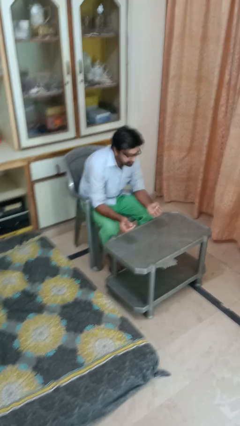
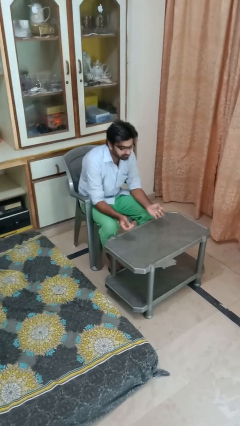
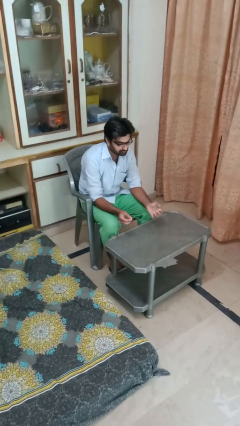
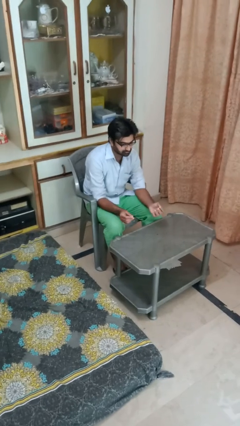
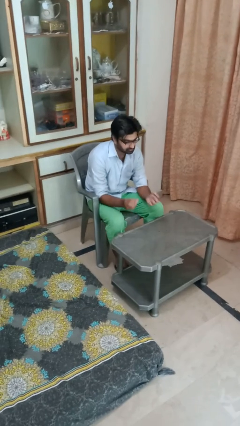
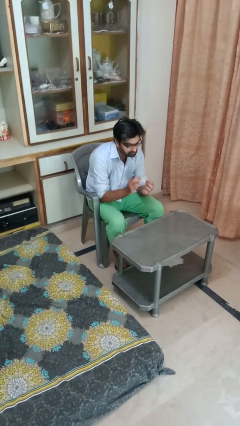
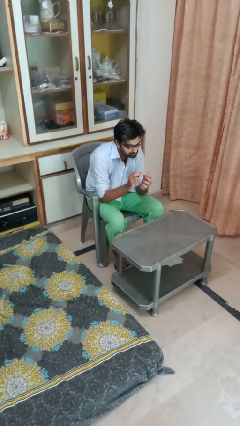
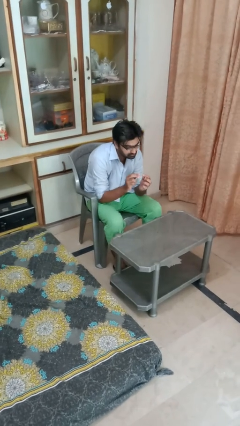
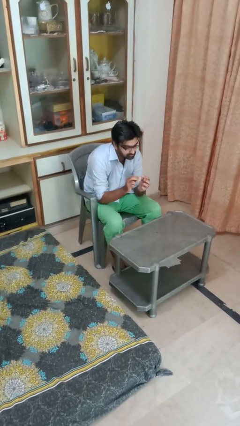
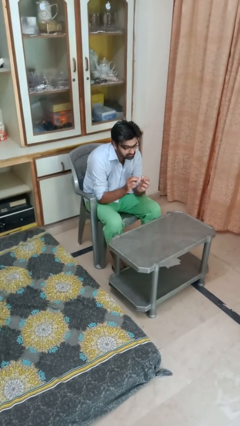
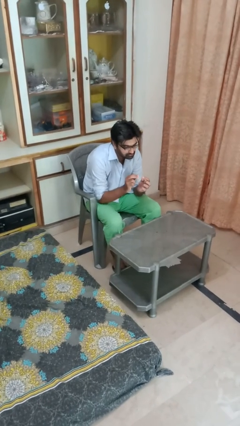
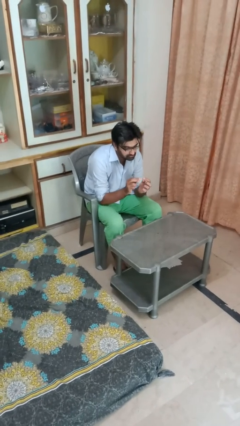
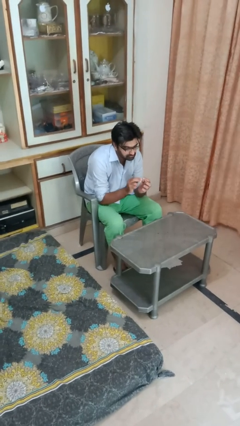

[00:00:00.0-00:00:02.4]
person files fingernails

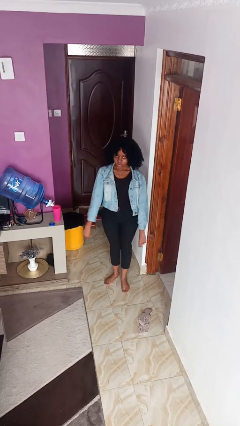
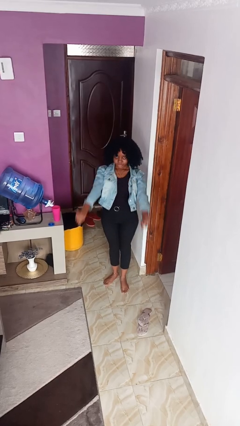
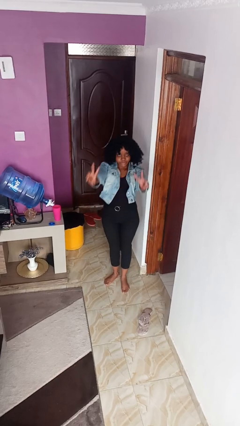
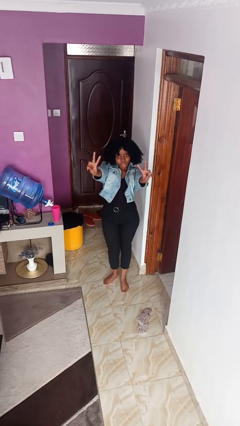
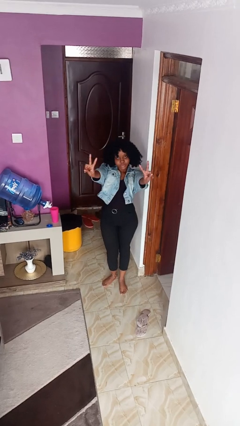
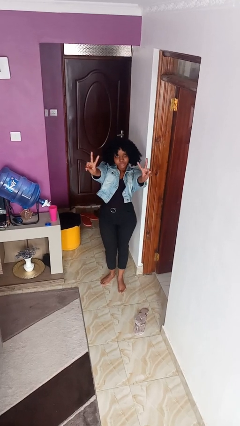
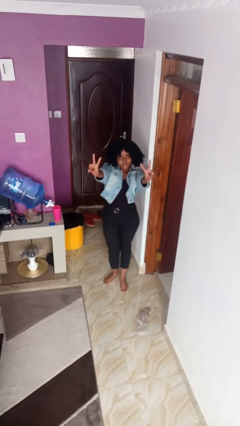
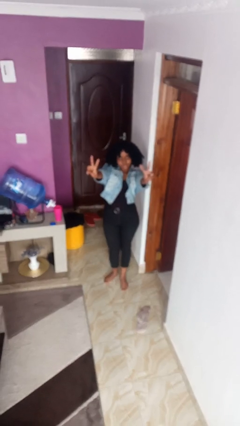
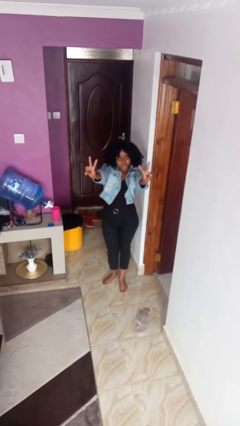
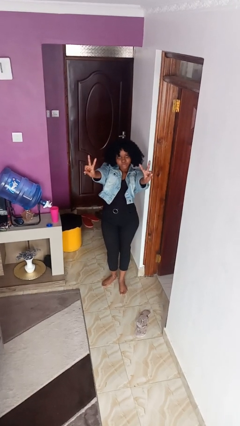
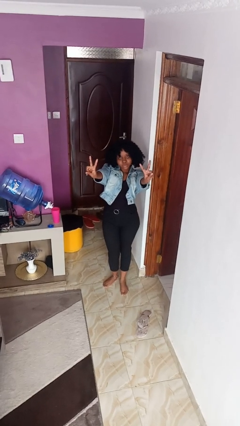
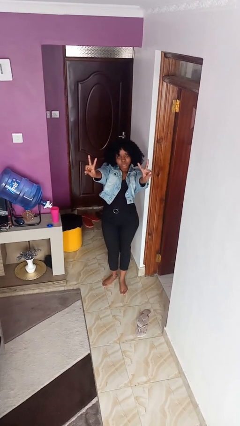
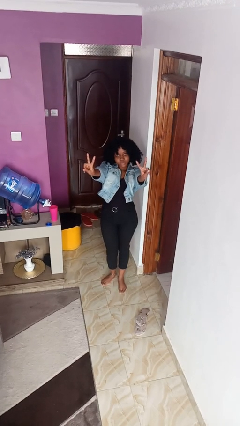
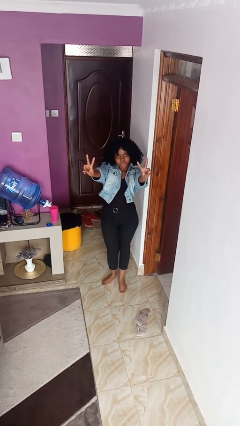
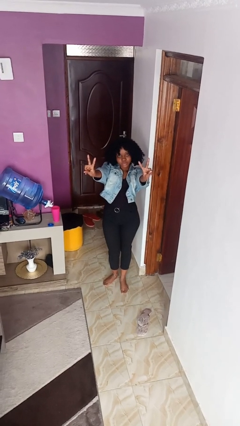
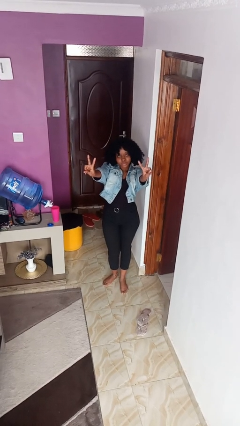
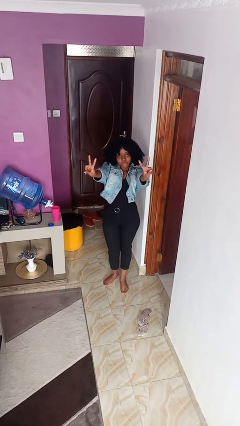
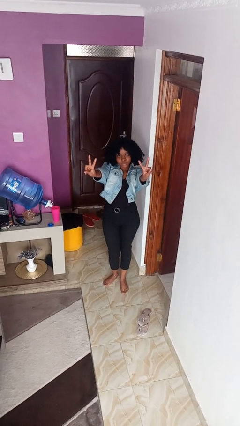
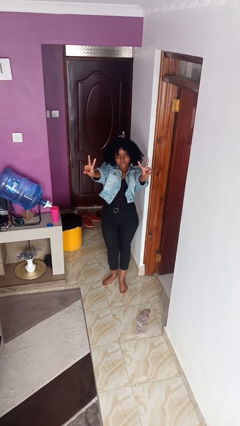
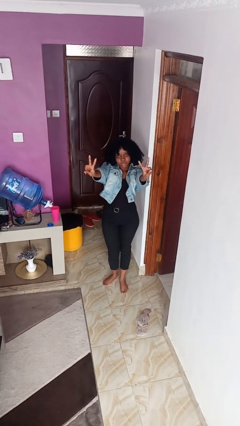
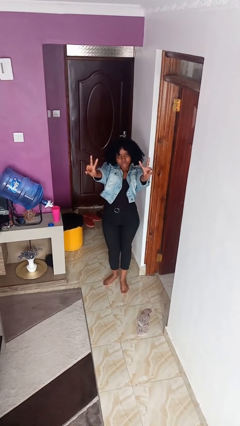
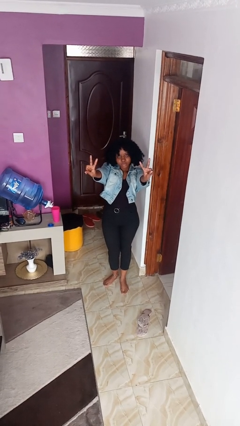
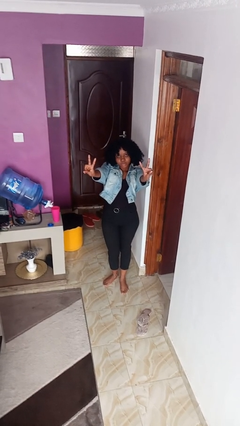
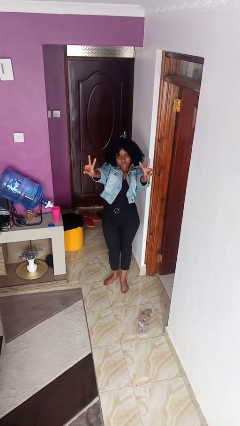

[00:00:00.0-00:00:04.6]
person gestures peace

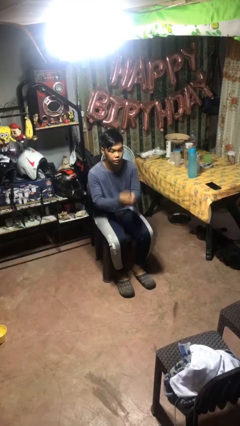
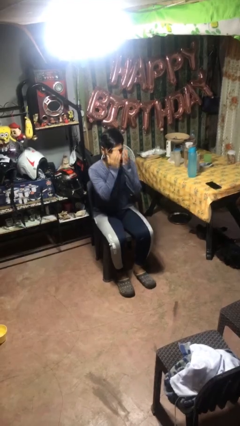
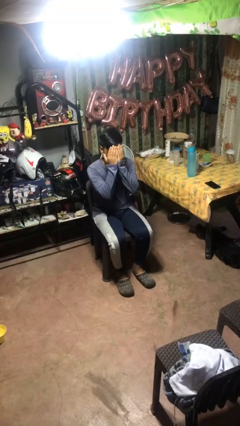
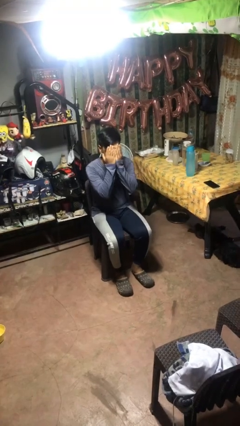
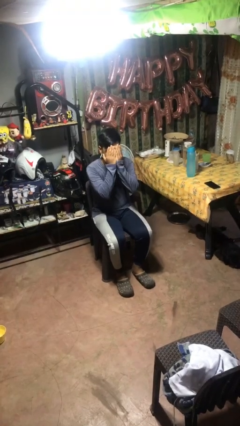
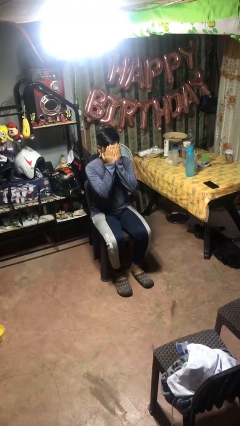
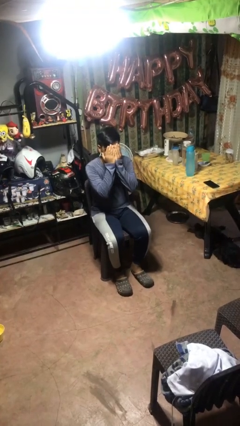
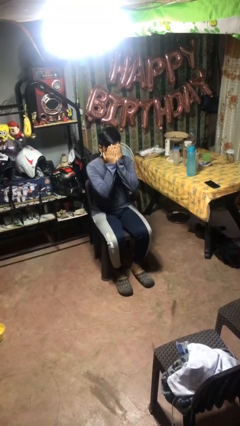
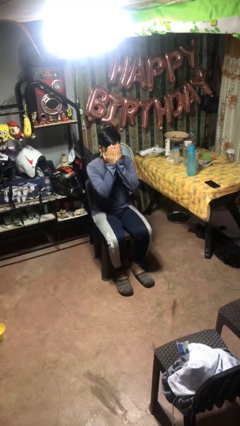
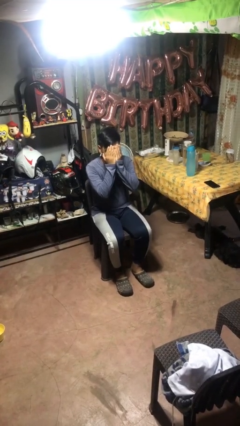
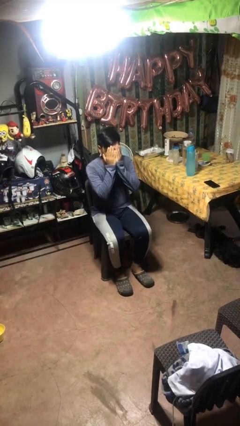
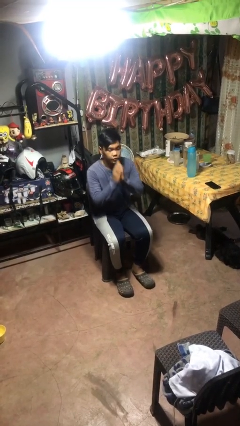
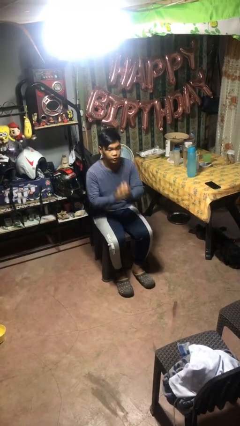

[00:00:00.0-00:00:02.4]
person covers face with hands

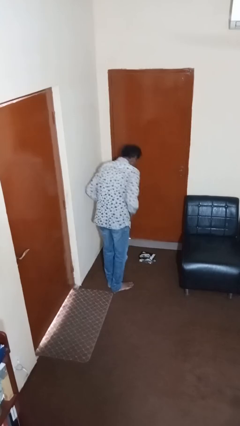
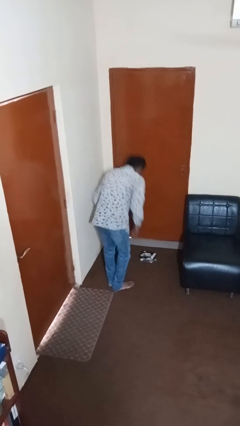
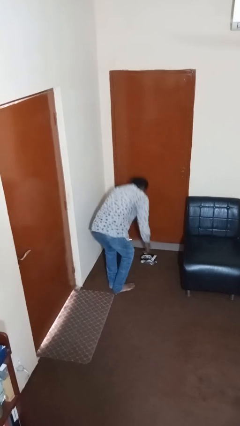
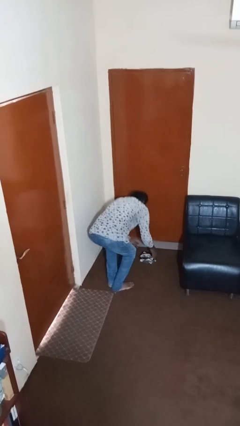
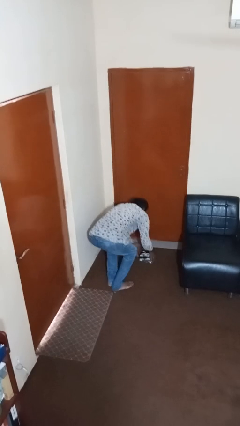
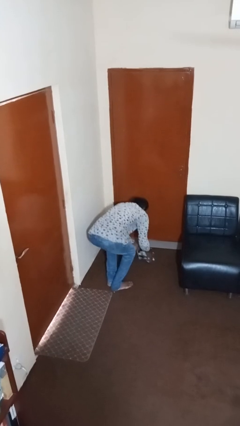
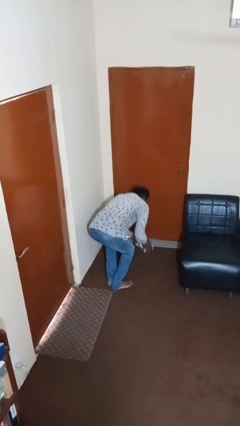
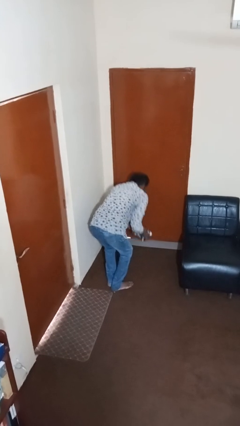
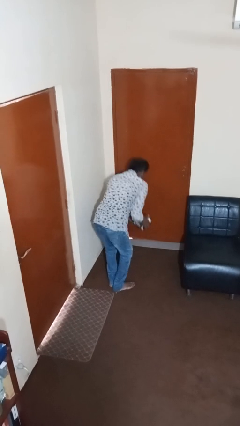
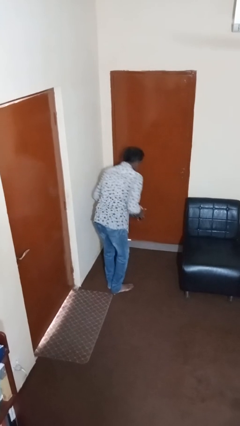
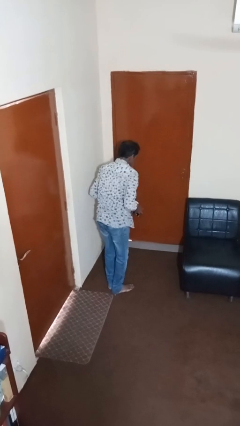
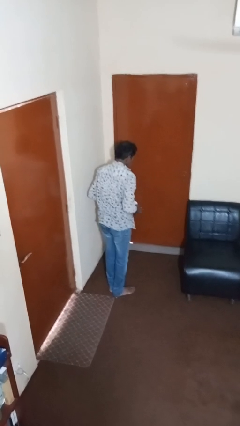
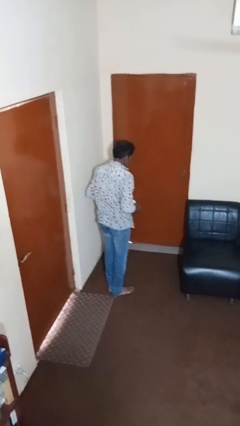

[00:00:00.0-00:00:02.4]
person picks up object from floor

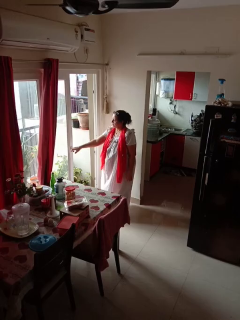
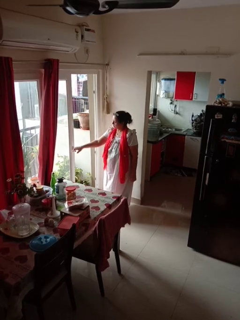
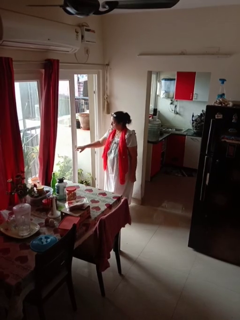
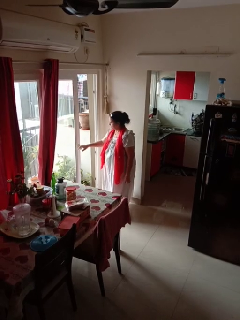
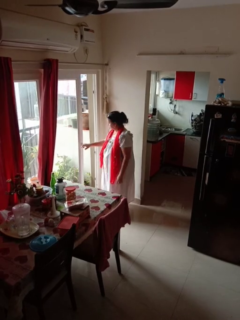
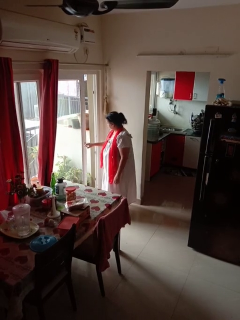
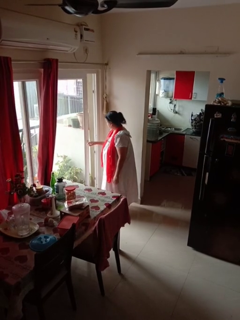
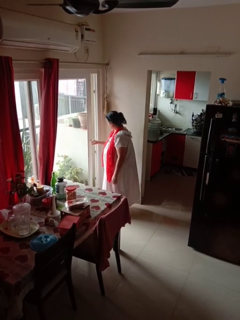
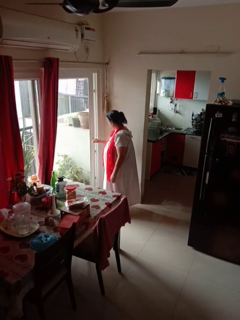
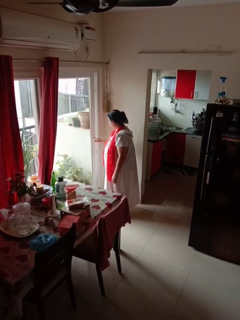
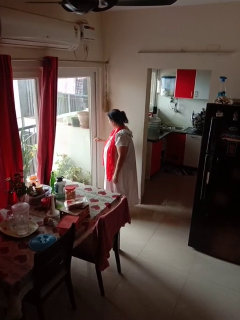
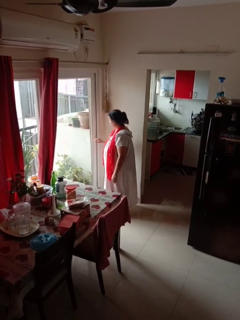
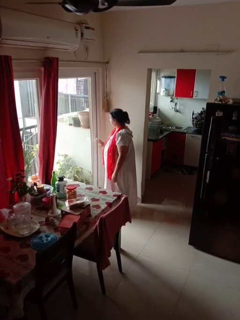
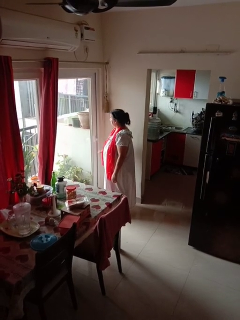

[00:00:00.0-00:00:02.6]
person closes sliding door

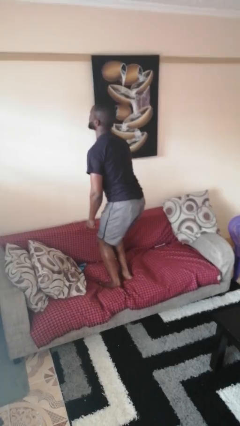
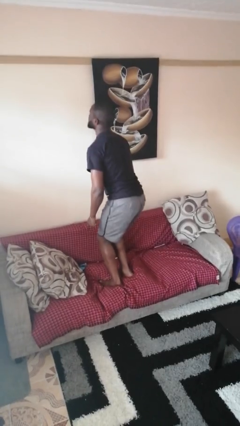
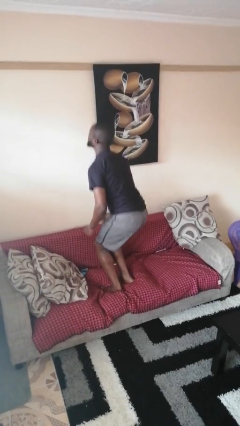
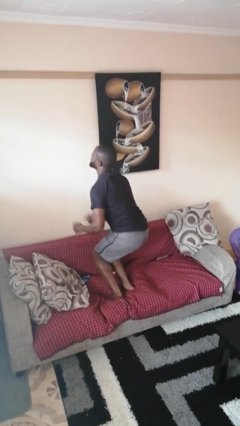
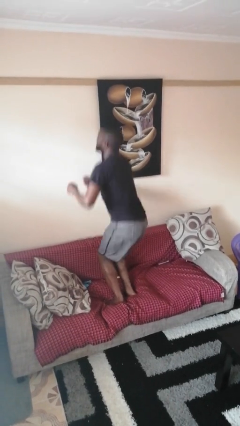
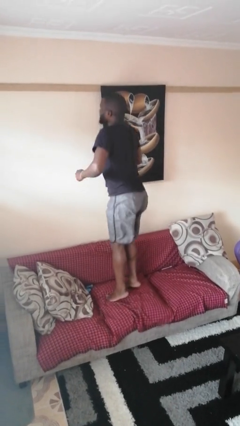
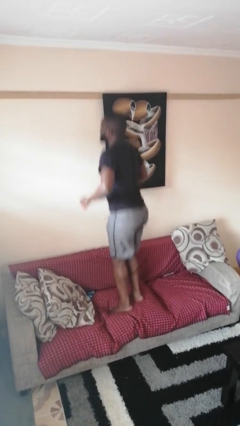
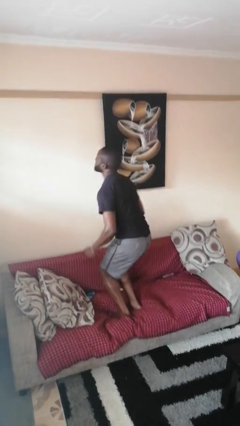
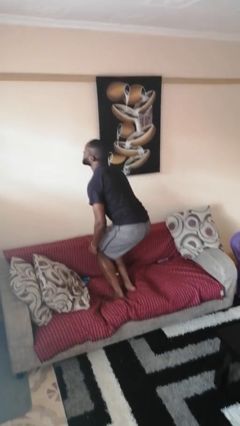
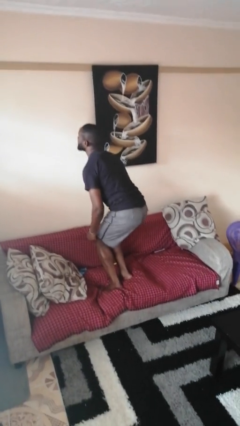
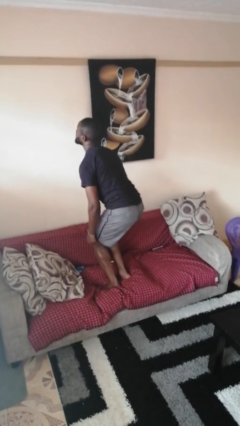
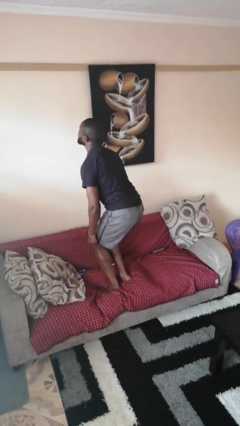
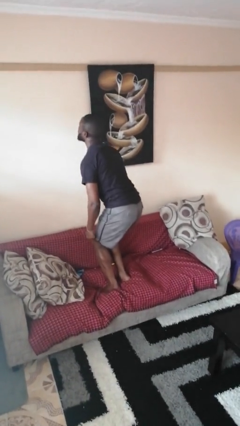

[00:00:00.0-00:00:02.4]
person jumps on couch

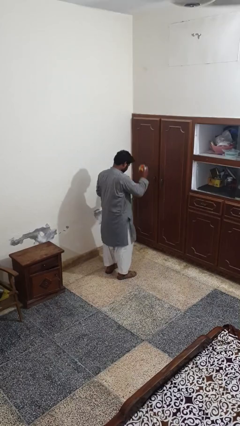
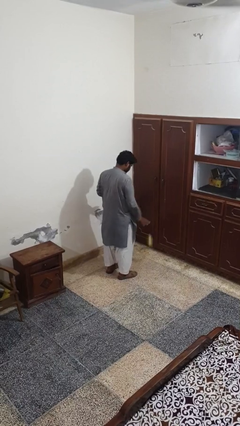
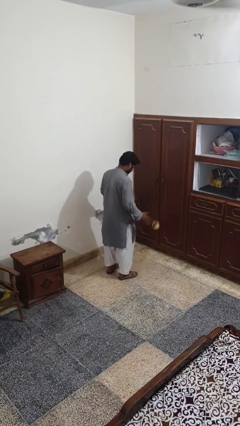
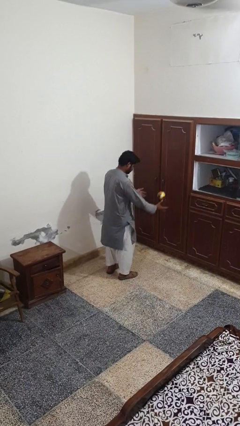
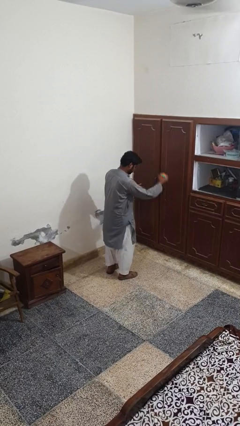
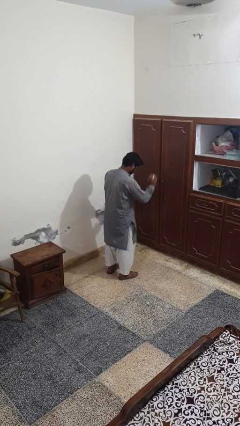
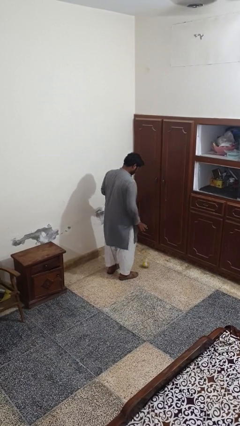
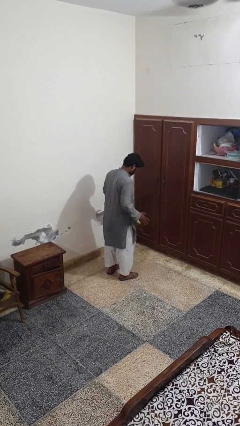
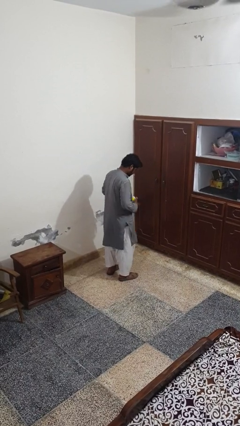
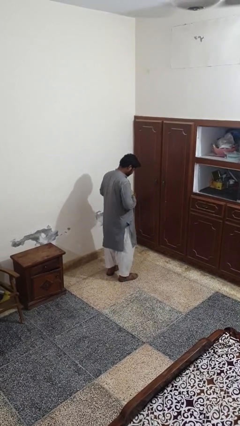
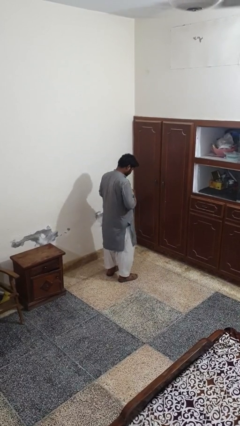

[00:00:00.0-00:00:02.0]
person bounces ball on floor
